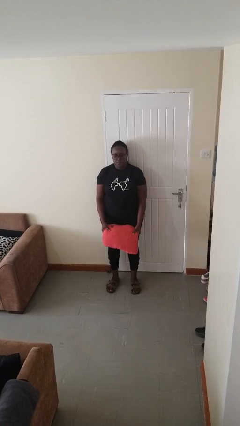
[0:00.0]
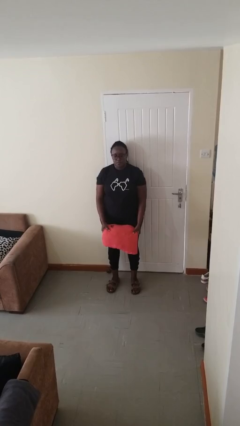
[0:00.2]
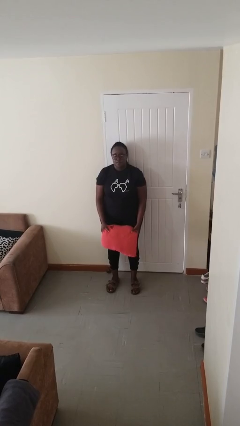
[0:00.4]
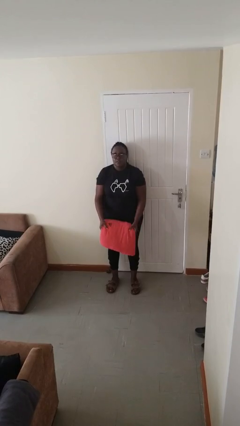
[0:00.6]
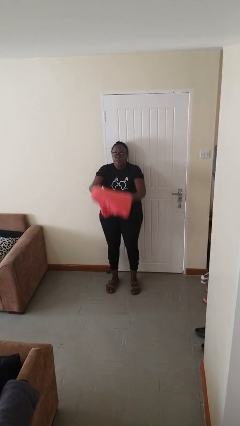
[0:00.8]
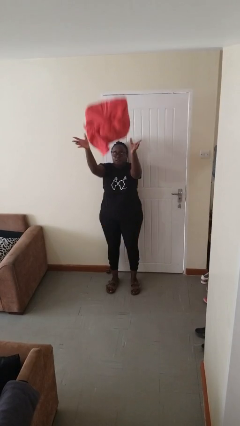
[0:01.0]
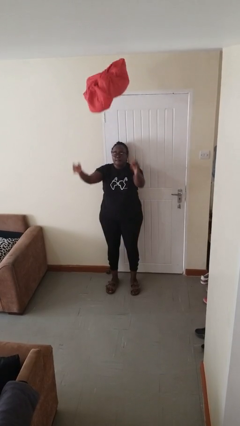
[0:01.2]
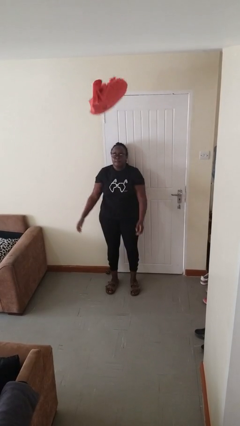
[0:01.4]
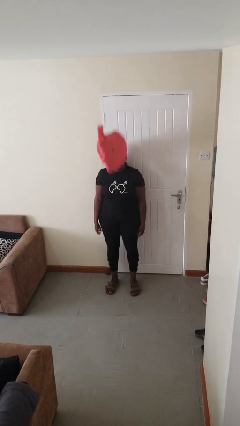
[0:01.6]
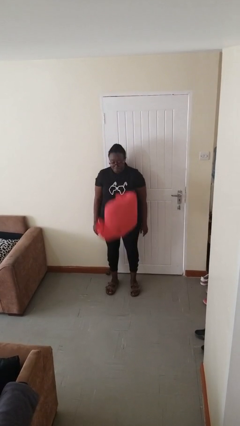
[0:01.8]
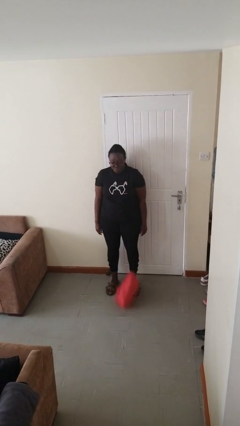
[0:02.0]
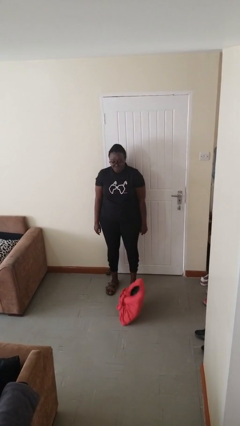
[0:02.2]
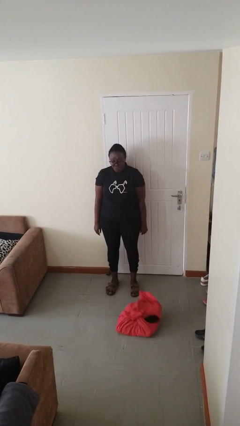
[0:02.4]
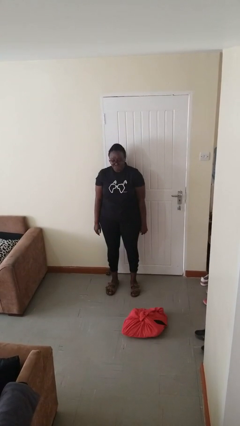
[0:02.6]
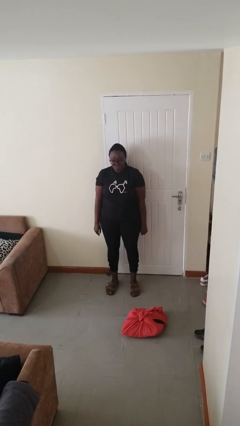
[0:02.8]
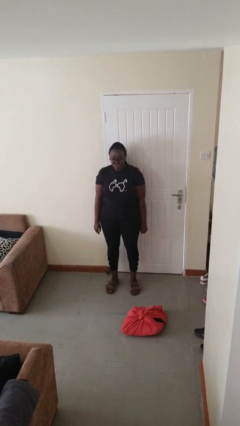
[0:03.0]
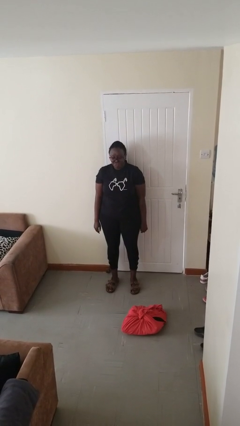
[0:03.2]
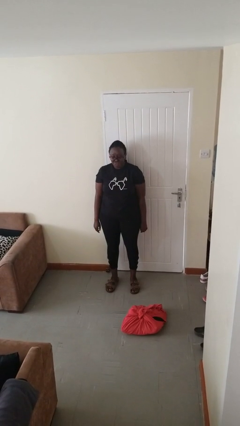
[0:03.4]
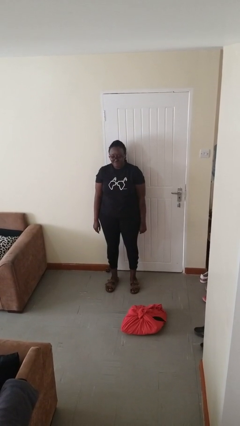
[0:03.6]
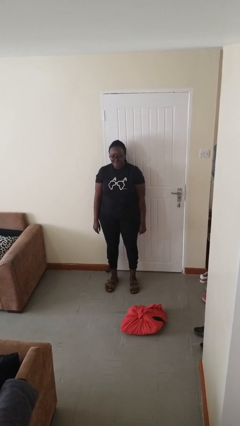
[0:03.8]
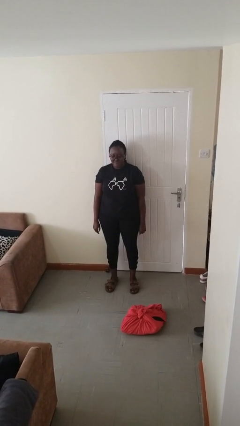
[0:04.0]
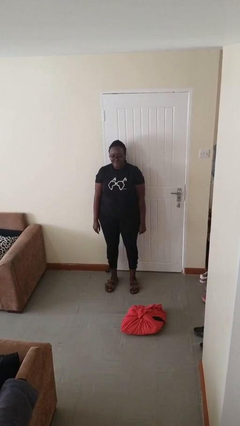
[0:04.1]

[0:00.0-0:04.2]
person throws object into air

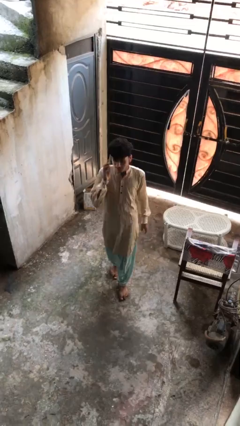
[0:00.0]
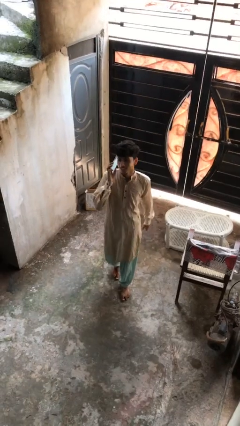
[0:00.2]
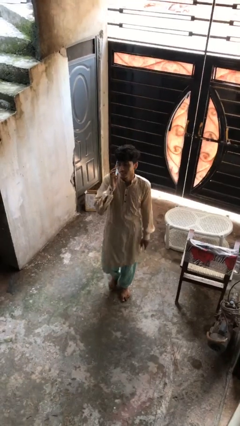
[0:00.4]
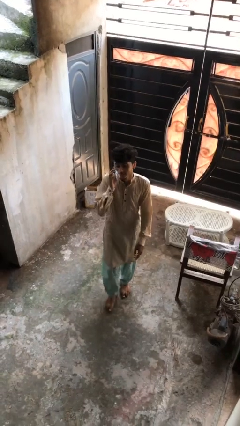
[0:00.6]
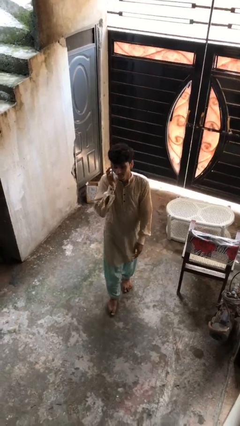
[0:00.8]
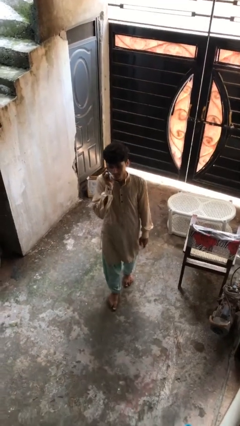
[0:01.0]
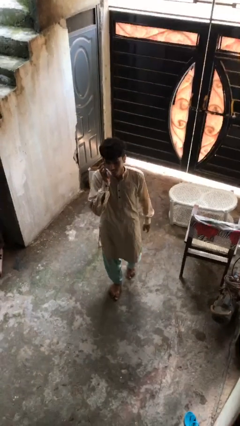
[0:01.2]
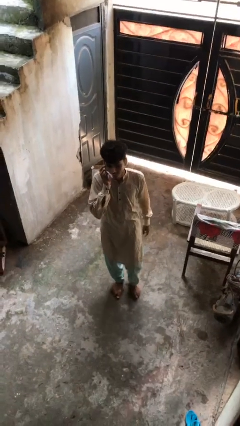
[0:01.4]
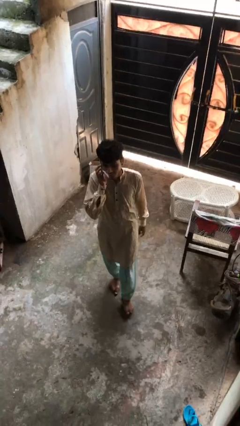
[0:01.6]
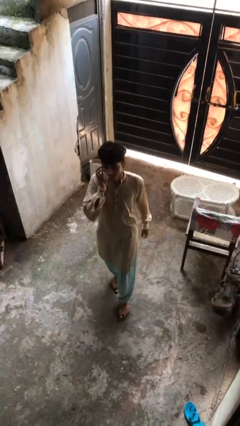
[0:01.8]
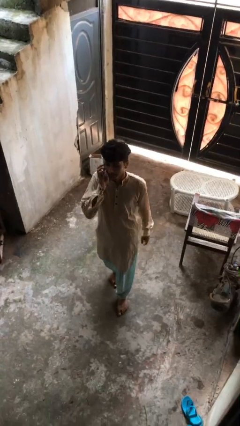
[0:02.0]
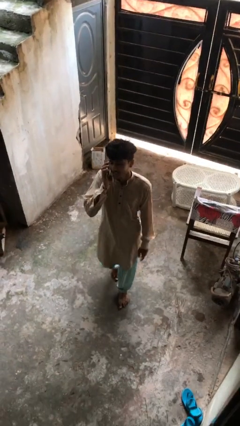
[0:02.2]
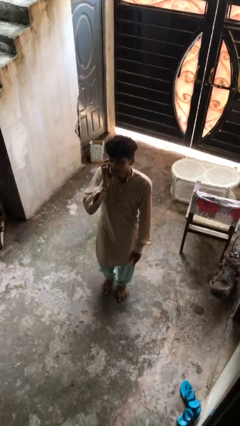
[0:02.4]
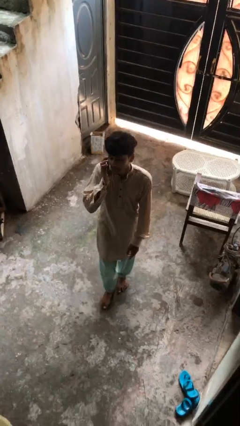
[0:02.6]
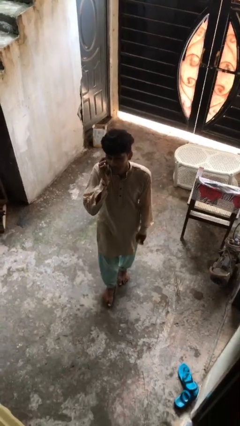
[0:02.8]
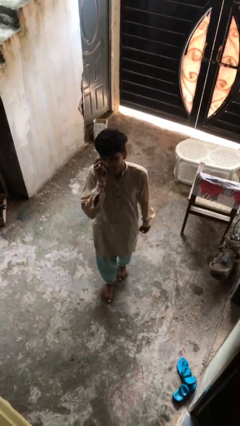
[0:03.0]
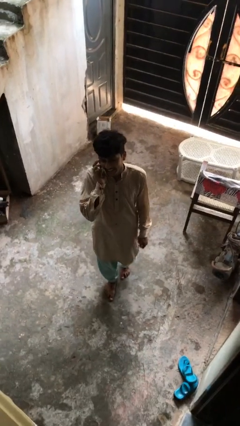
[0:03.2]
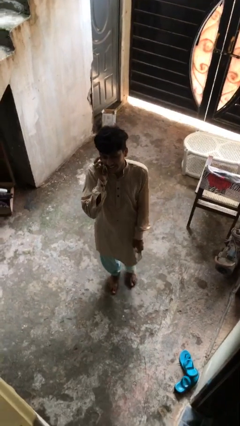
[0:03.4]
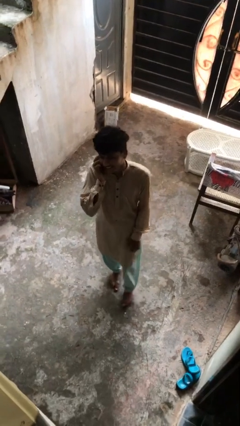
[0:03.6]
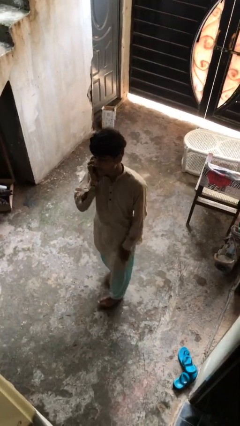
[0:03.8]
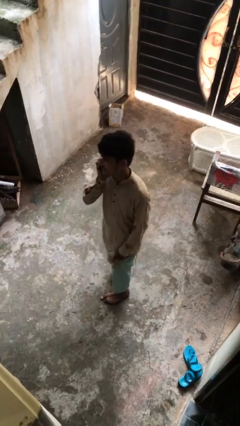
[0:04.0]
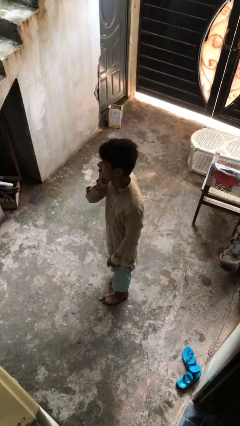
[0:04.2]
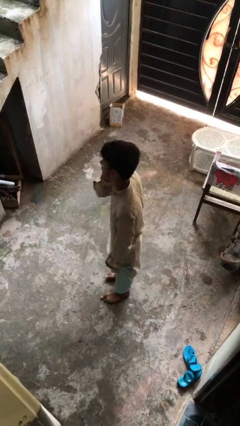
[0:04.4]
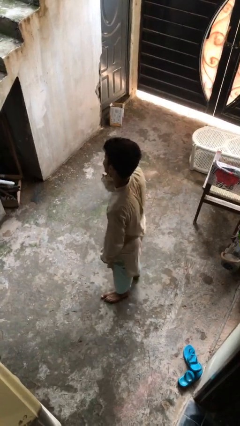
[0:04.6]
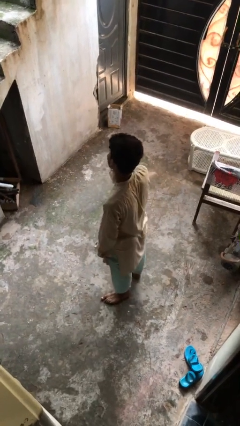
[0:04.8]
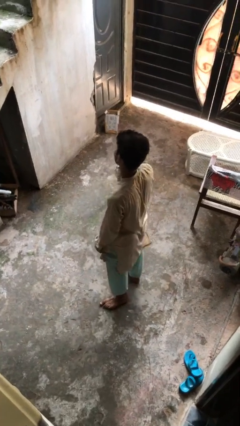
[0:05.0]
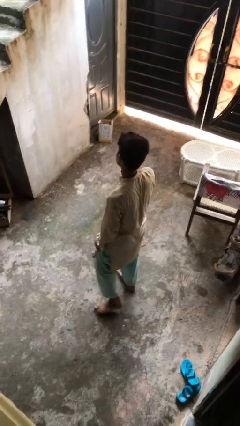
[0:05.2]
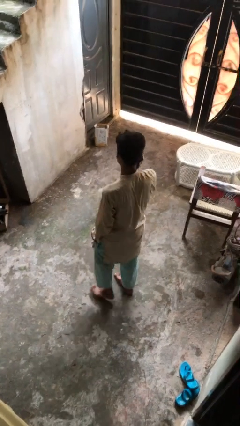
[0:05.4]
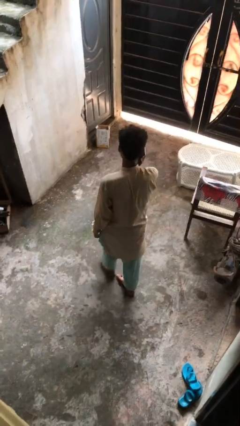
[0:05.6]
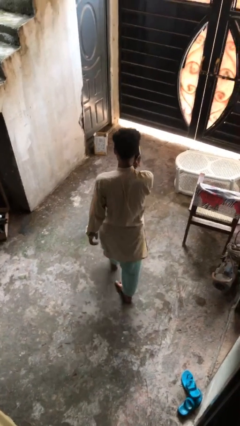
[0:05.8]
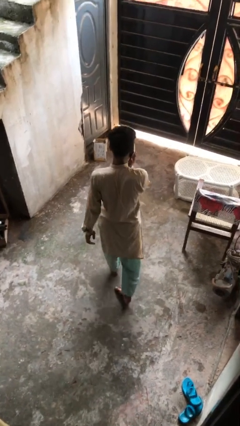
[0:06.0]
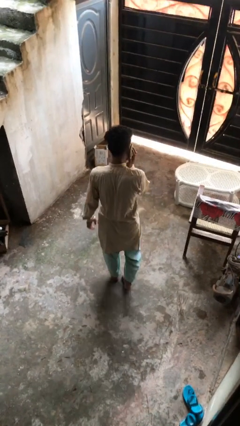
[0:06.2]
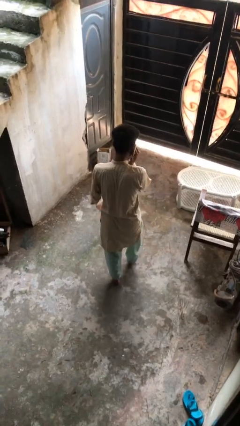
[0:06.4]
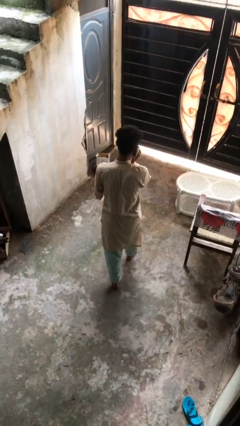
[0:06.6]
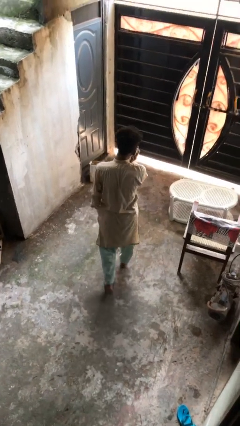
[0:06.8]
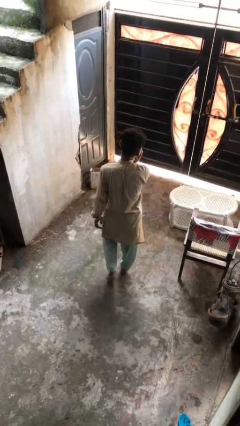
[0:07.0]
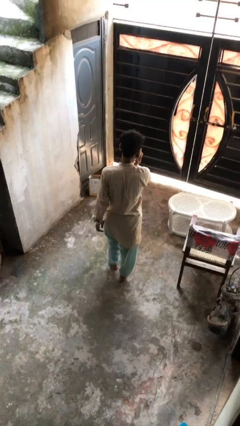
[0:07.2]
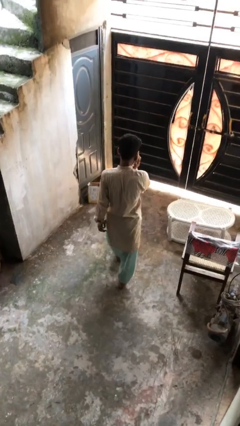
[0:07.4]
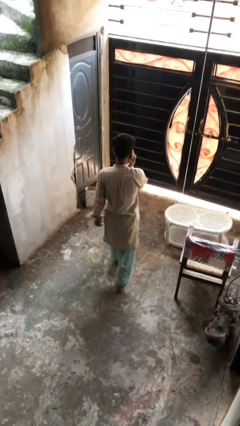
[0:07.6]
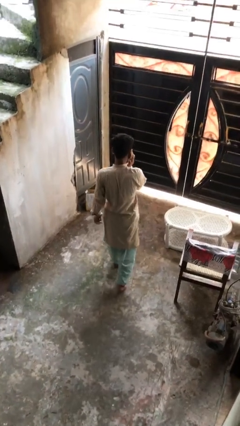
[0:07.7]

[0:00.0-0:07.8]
person talks on phone

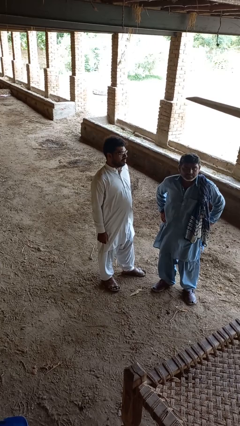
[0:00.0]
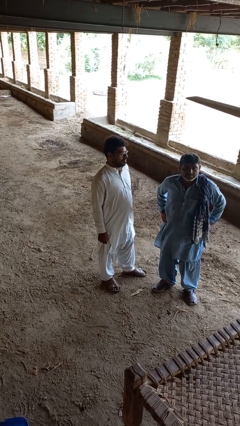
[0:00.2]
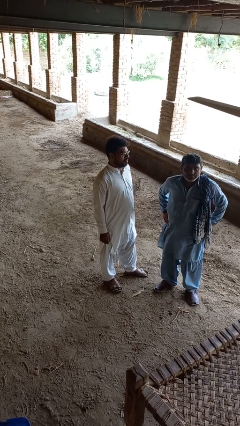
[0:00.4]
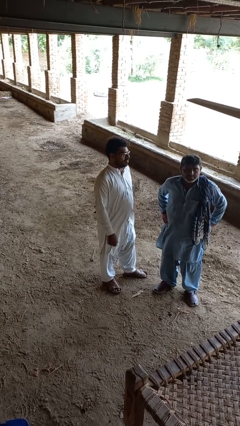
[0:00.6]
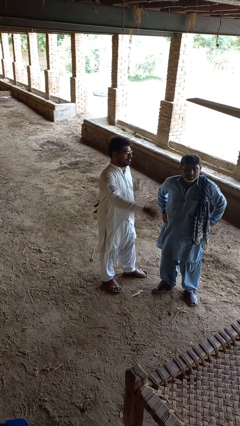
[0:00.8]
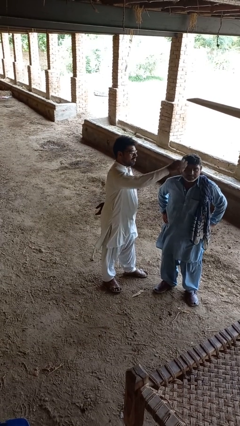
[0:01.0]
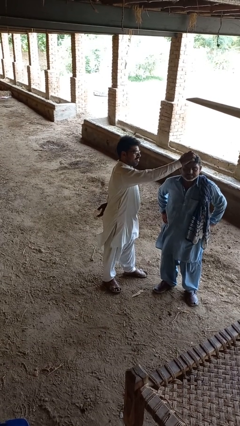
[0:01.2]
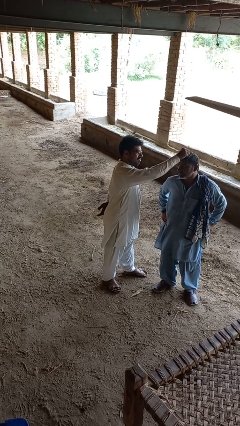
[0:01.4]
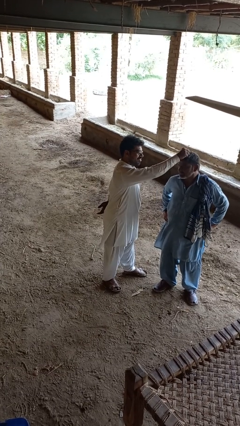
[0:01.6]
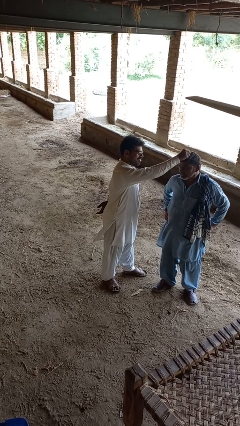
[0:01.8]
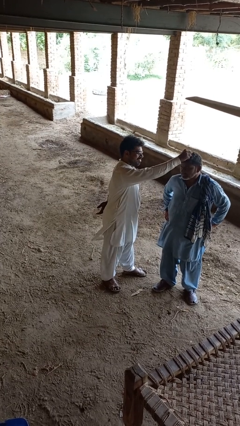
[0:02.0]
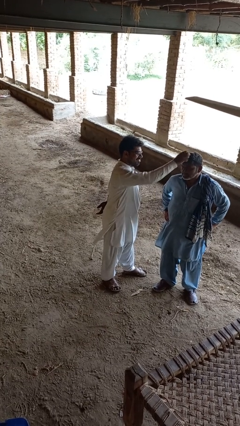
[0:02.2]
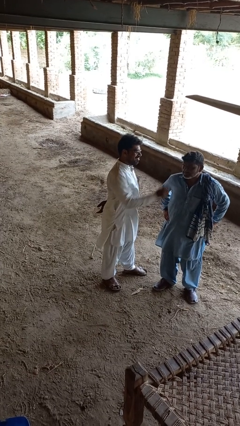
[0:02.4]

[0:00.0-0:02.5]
person grabs person by hair

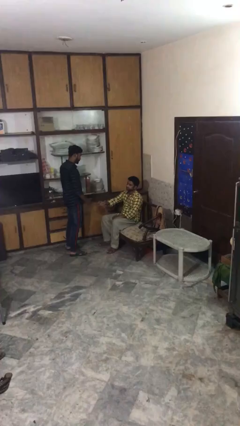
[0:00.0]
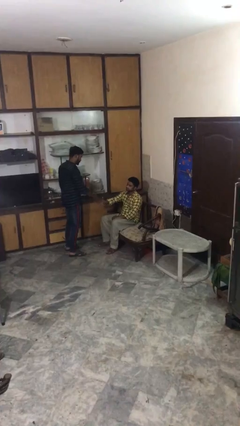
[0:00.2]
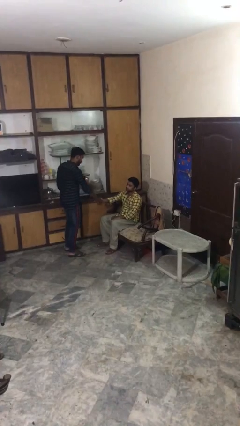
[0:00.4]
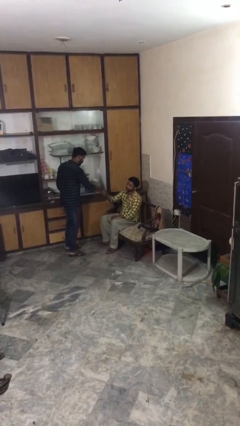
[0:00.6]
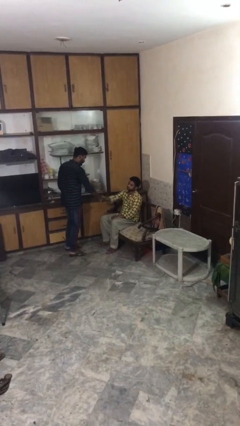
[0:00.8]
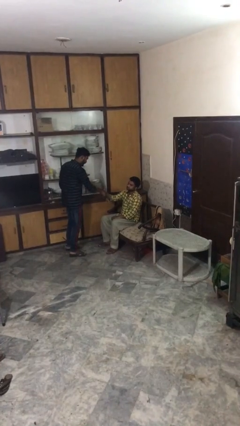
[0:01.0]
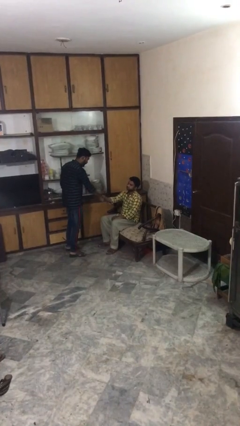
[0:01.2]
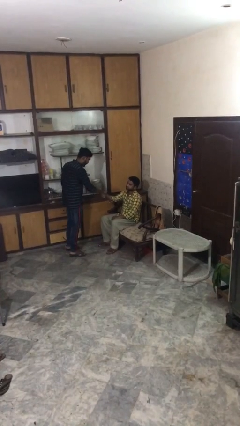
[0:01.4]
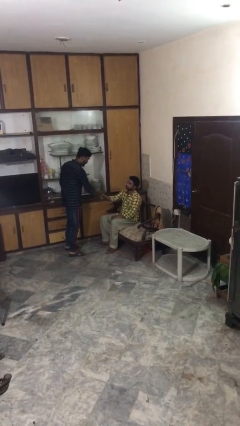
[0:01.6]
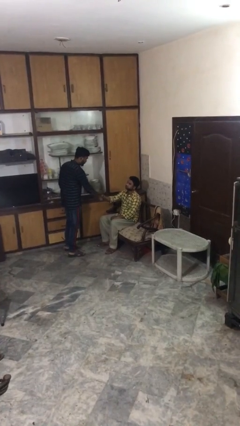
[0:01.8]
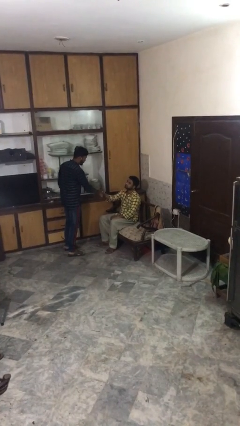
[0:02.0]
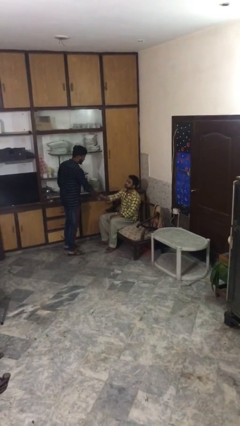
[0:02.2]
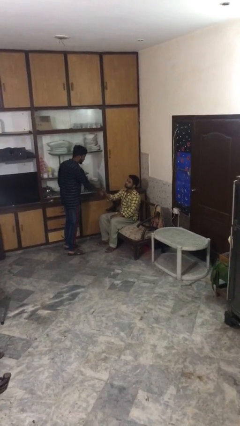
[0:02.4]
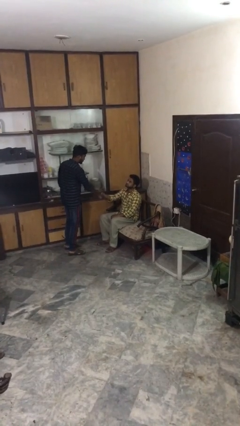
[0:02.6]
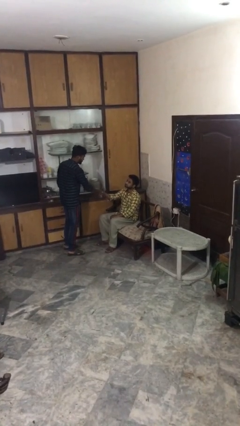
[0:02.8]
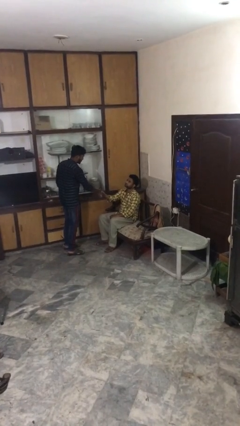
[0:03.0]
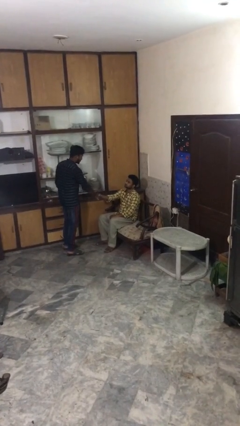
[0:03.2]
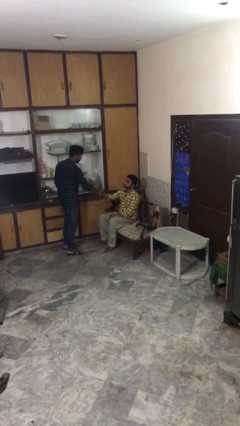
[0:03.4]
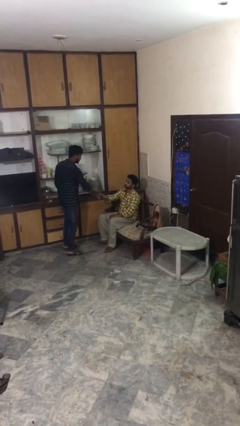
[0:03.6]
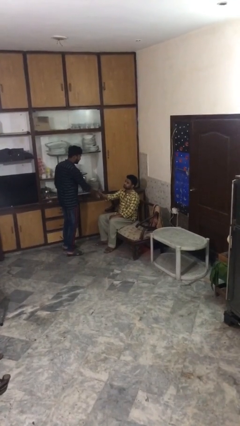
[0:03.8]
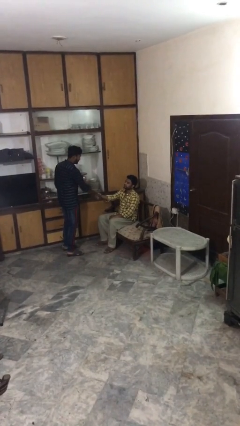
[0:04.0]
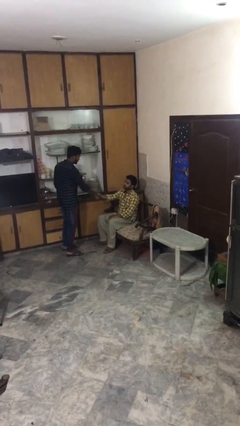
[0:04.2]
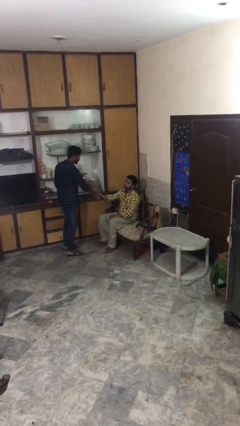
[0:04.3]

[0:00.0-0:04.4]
person shakes hand
